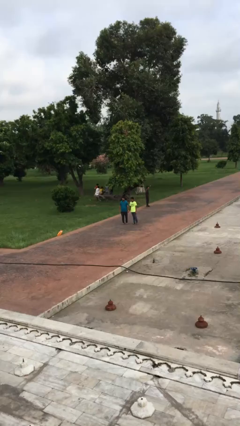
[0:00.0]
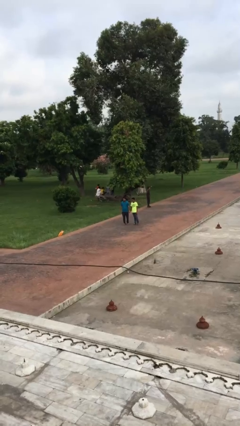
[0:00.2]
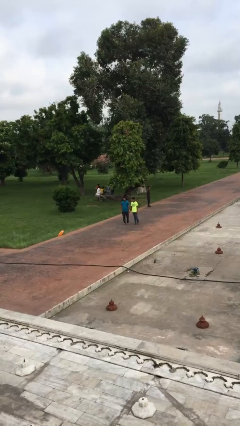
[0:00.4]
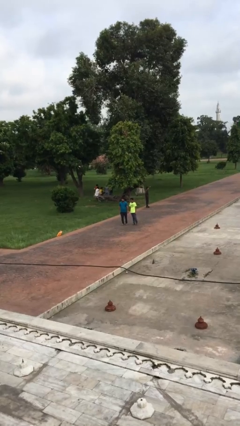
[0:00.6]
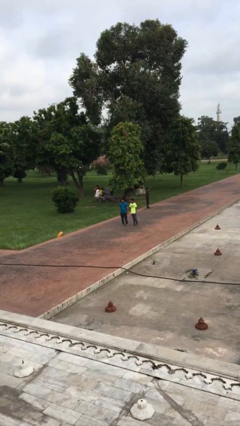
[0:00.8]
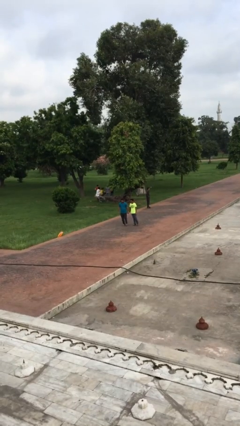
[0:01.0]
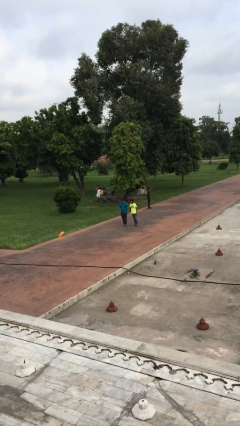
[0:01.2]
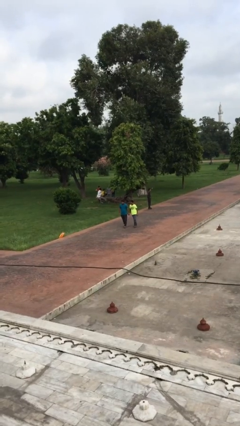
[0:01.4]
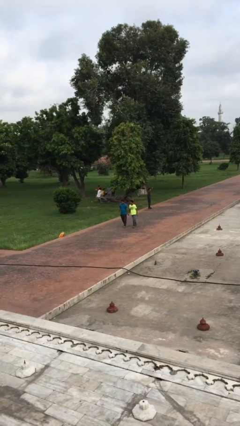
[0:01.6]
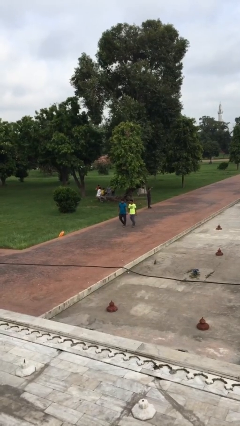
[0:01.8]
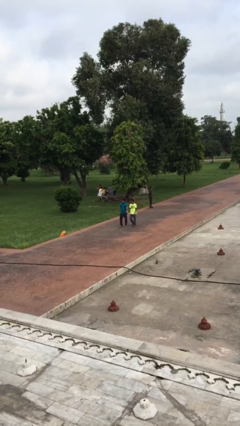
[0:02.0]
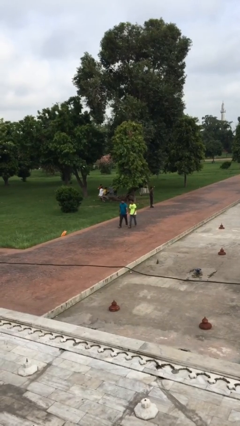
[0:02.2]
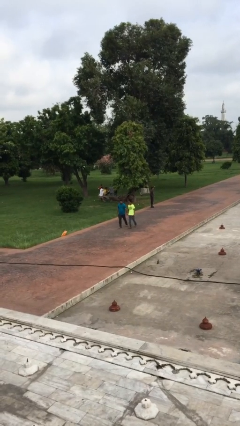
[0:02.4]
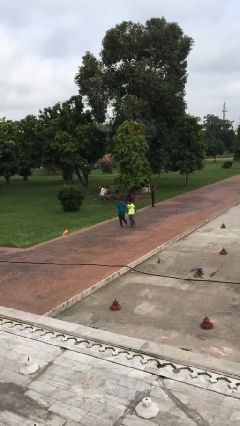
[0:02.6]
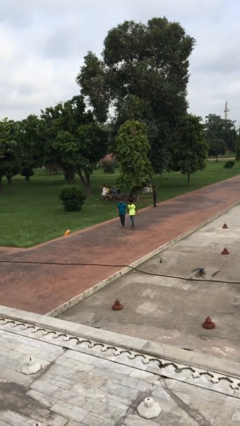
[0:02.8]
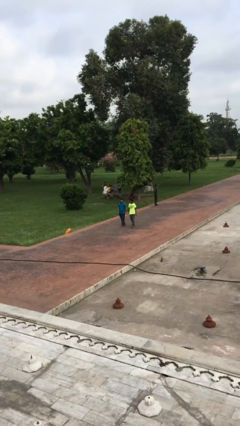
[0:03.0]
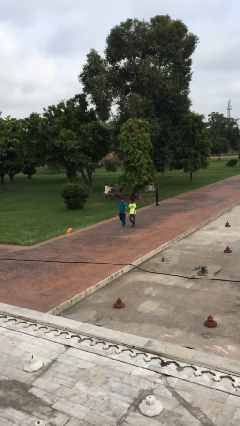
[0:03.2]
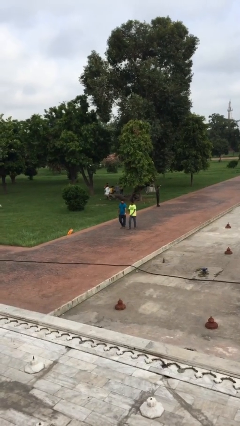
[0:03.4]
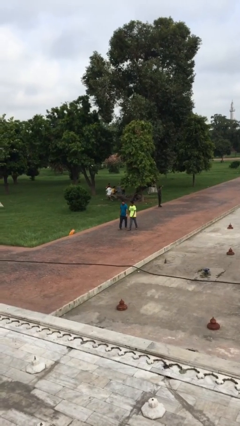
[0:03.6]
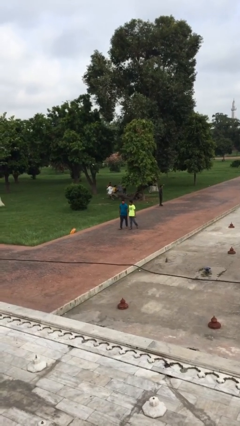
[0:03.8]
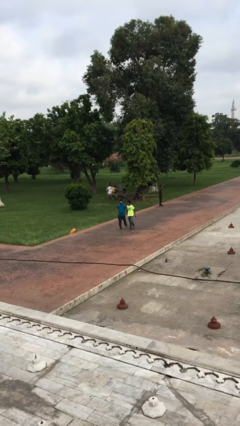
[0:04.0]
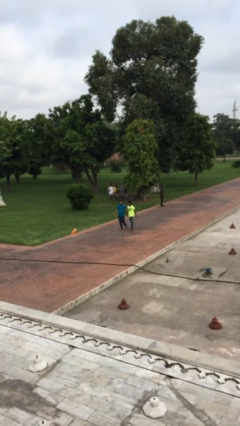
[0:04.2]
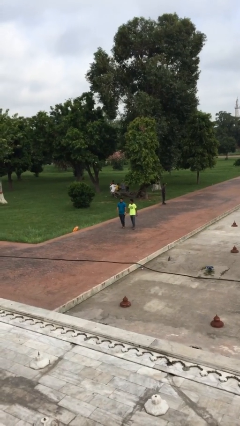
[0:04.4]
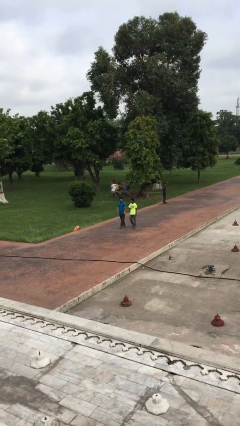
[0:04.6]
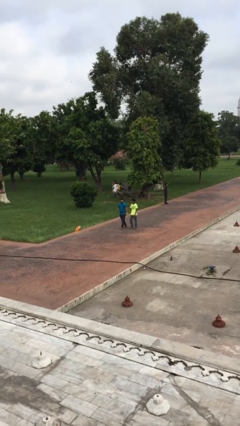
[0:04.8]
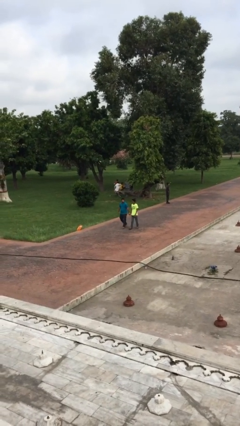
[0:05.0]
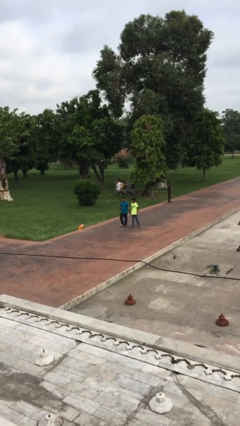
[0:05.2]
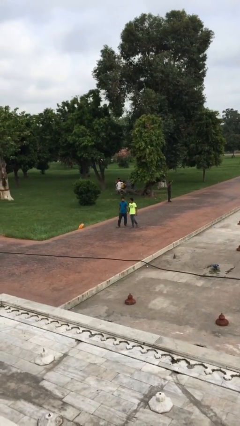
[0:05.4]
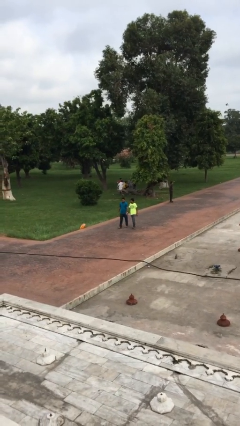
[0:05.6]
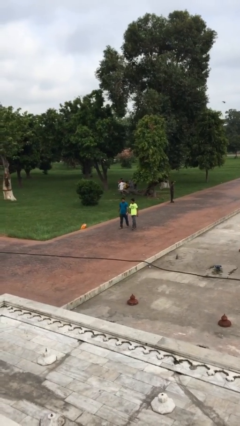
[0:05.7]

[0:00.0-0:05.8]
person holds hand

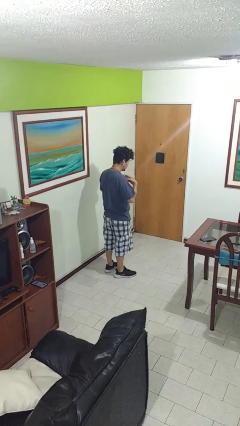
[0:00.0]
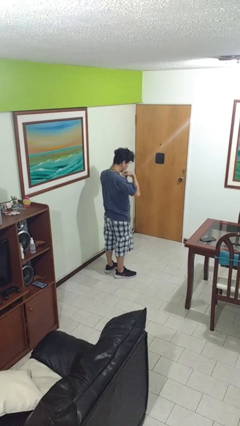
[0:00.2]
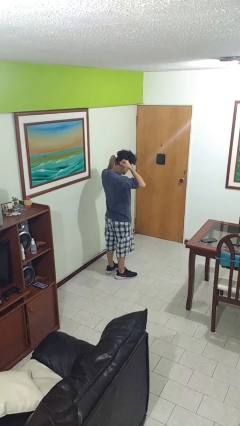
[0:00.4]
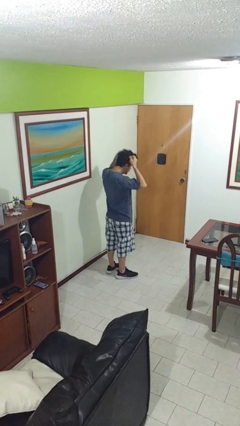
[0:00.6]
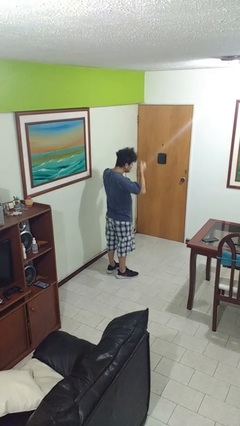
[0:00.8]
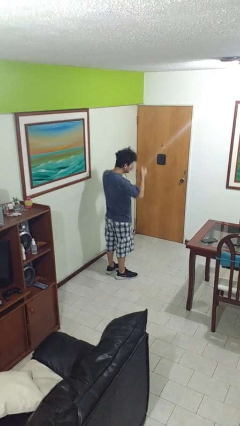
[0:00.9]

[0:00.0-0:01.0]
person takes off necklace

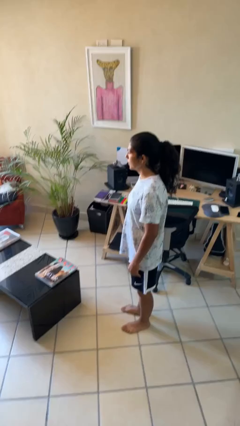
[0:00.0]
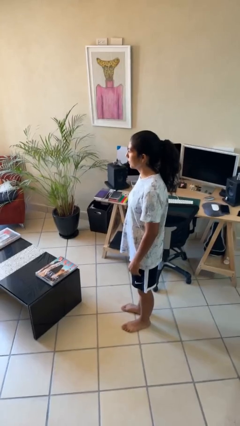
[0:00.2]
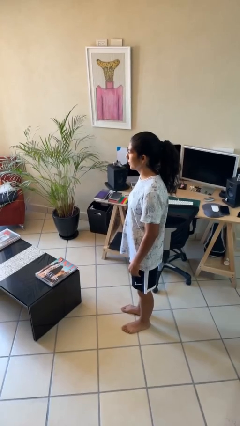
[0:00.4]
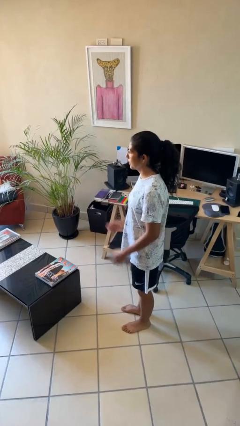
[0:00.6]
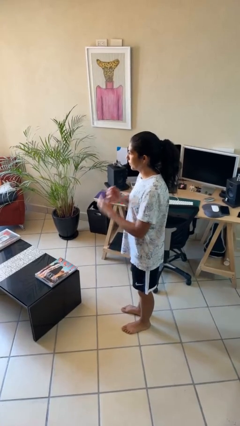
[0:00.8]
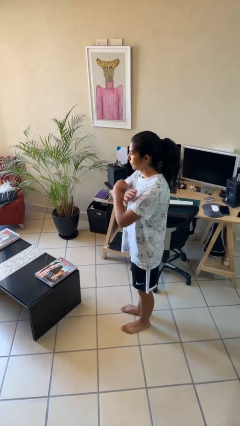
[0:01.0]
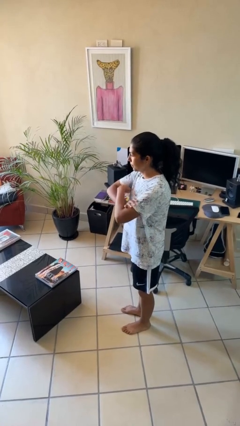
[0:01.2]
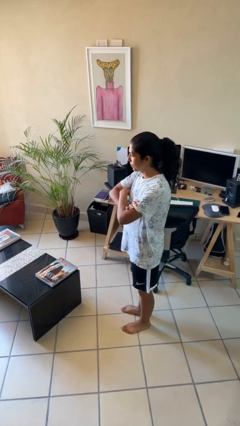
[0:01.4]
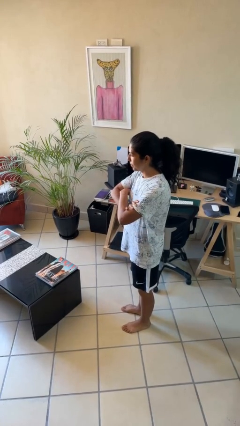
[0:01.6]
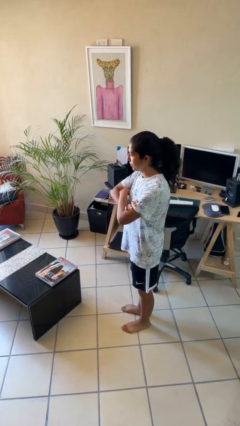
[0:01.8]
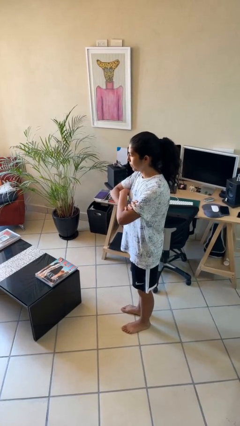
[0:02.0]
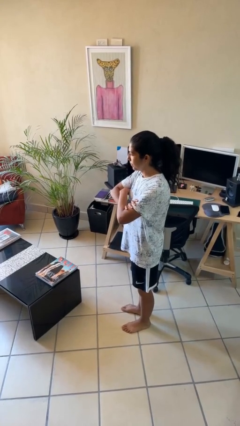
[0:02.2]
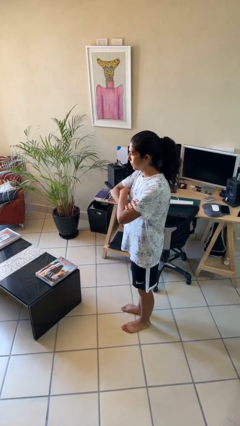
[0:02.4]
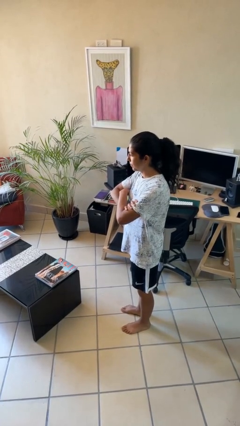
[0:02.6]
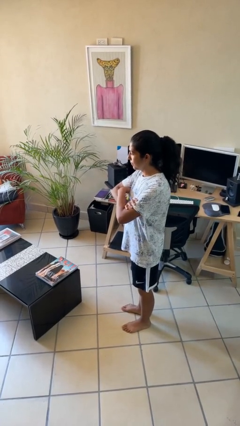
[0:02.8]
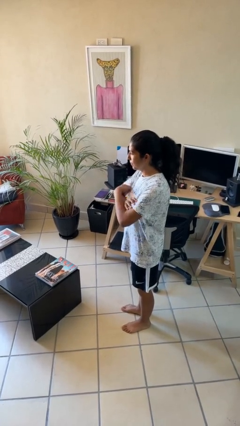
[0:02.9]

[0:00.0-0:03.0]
person crosses arms

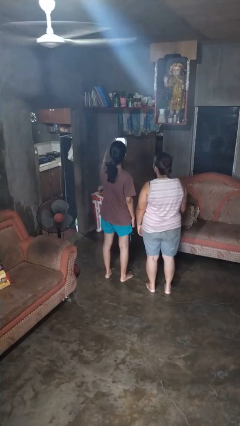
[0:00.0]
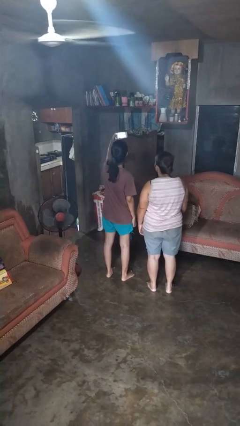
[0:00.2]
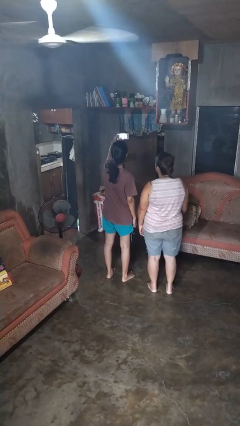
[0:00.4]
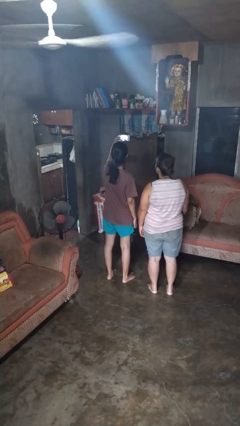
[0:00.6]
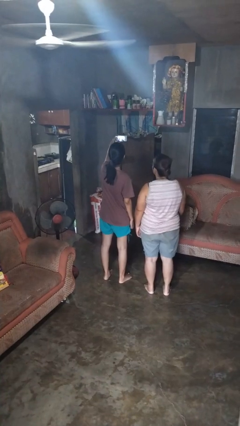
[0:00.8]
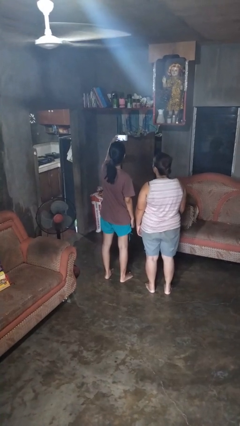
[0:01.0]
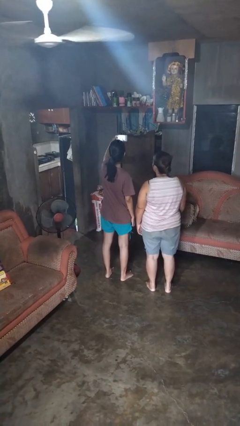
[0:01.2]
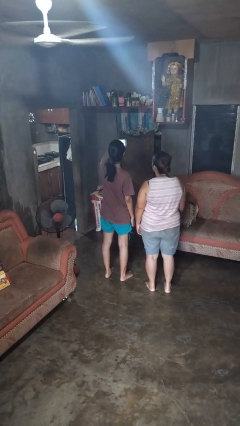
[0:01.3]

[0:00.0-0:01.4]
person takes selfie with person

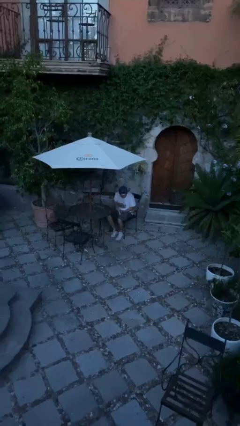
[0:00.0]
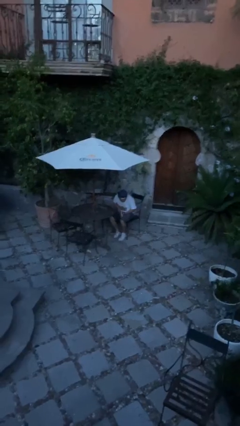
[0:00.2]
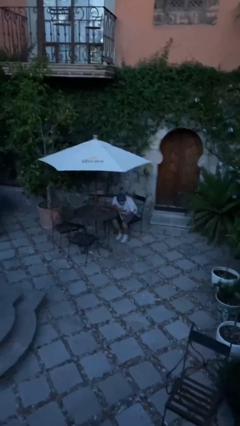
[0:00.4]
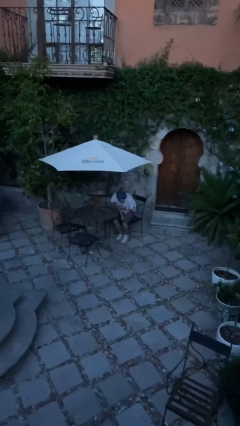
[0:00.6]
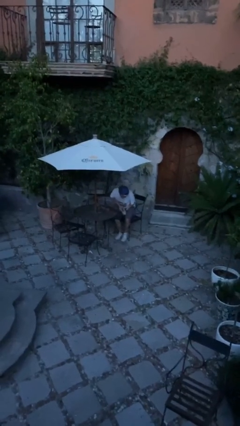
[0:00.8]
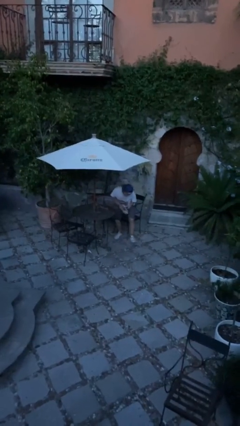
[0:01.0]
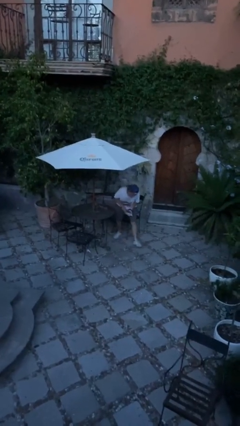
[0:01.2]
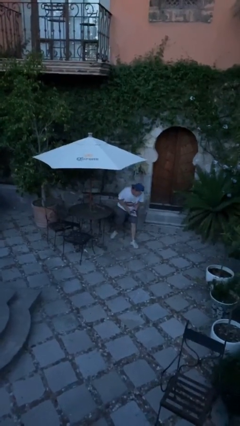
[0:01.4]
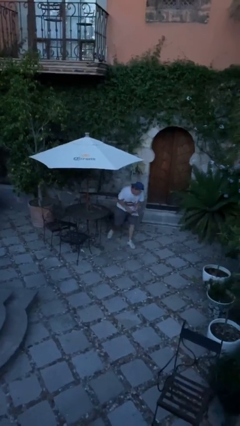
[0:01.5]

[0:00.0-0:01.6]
person stands up

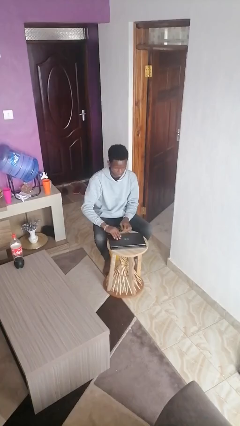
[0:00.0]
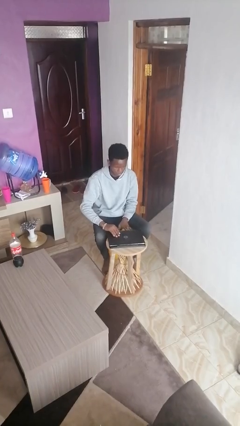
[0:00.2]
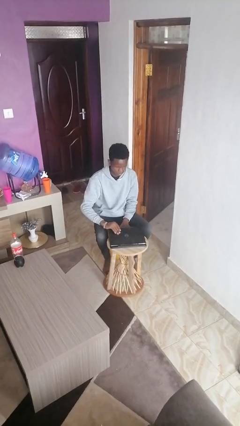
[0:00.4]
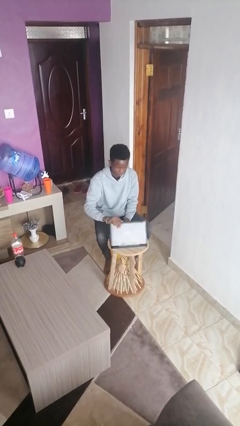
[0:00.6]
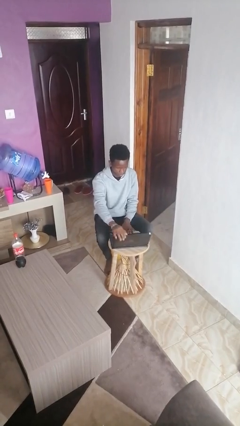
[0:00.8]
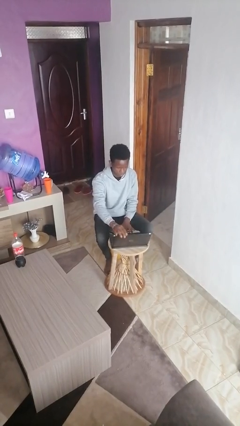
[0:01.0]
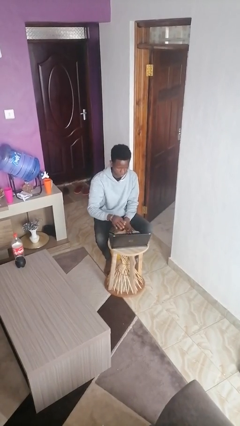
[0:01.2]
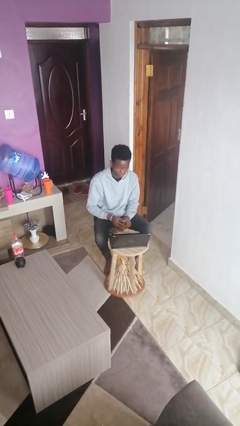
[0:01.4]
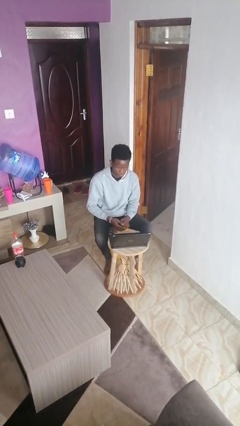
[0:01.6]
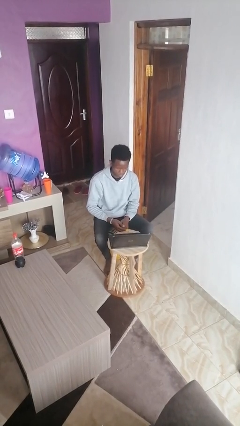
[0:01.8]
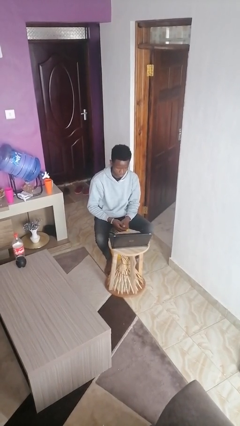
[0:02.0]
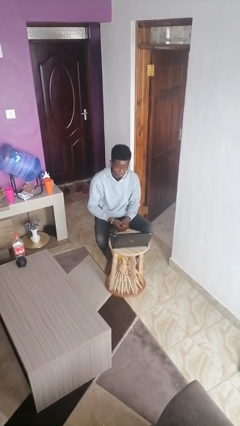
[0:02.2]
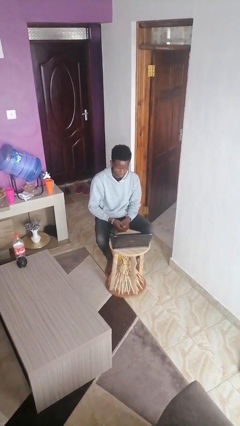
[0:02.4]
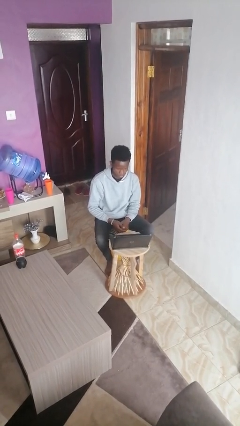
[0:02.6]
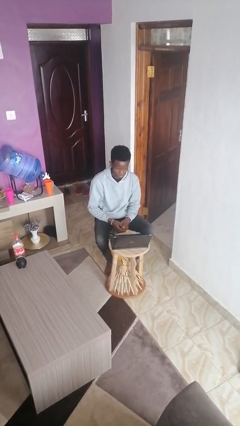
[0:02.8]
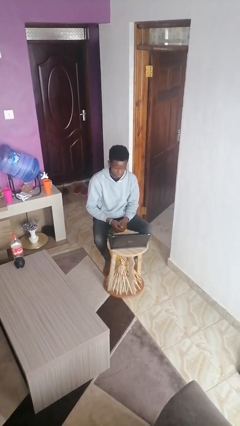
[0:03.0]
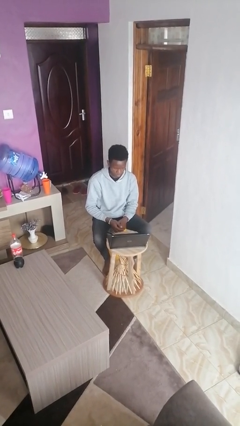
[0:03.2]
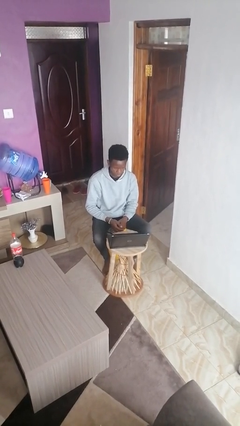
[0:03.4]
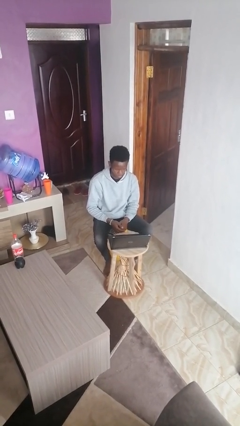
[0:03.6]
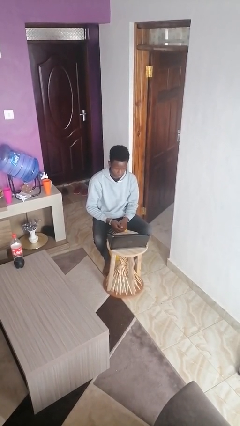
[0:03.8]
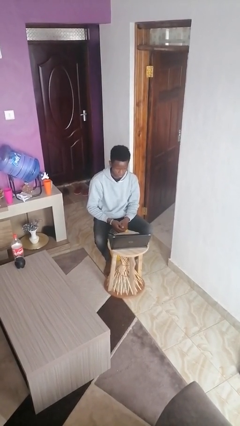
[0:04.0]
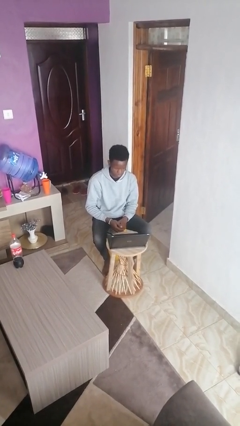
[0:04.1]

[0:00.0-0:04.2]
person opens laptop

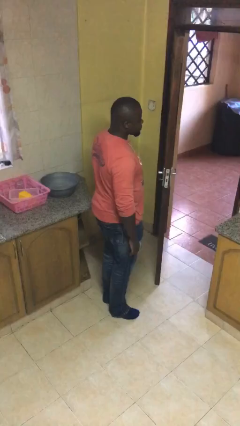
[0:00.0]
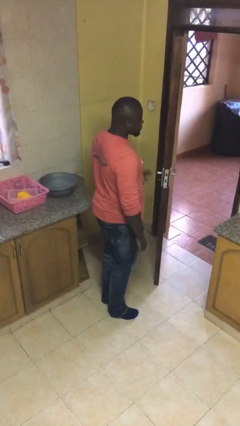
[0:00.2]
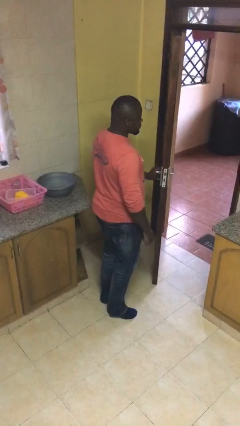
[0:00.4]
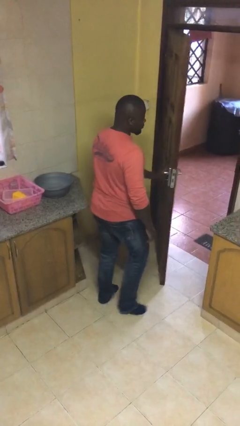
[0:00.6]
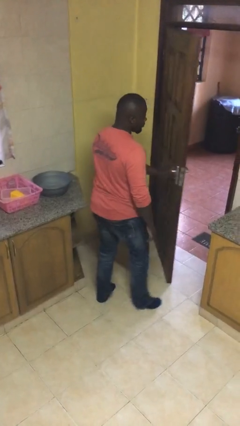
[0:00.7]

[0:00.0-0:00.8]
person closes facility door
